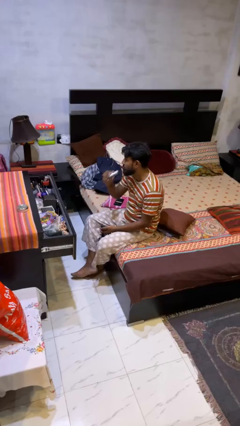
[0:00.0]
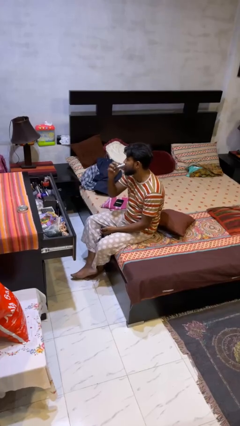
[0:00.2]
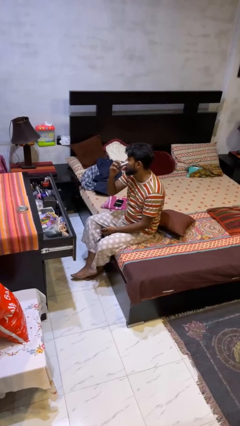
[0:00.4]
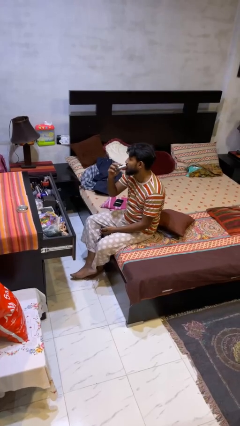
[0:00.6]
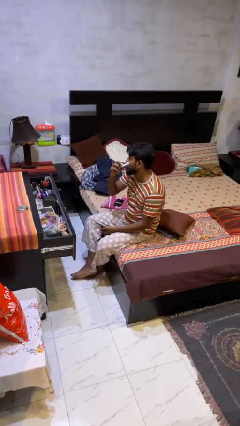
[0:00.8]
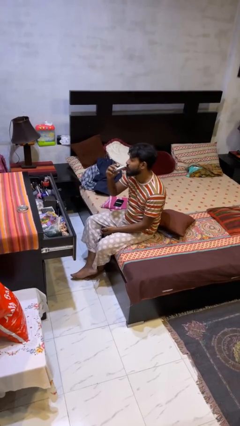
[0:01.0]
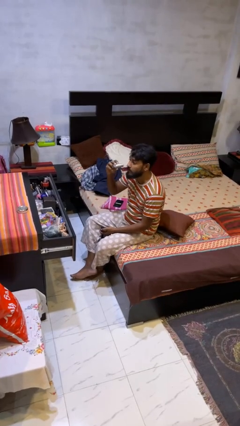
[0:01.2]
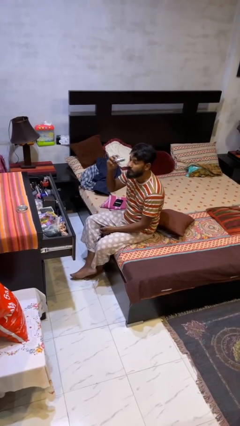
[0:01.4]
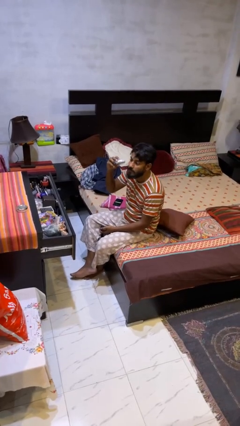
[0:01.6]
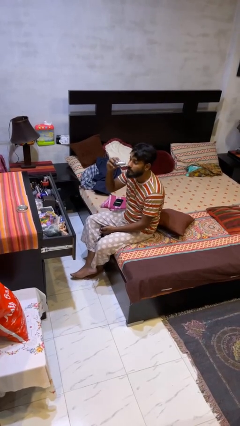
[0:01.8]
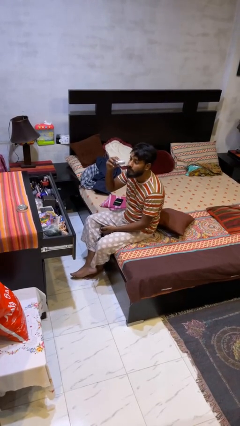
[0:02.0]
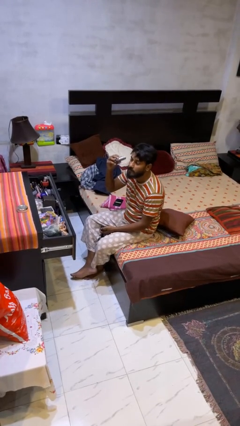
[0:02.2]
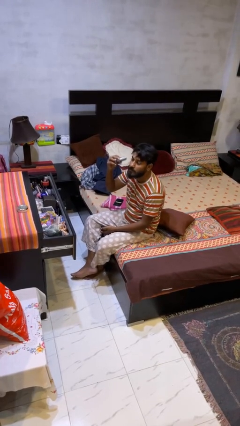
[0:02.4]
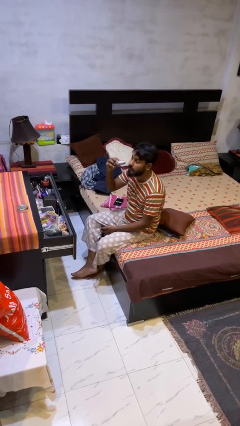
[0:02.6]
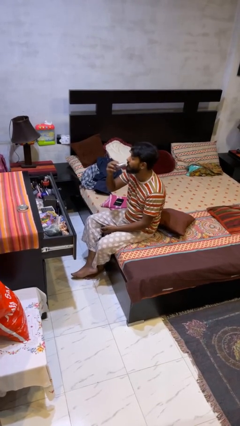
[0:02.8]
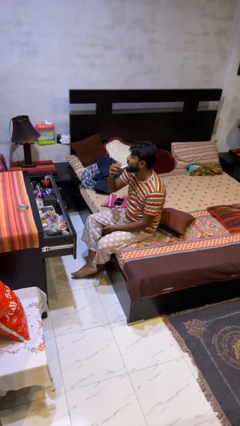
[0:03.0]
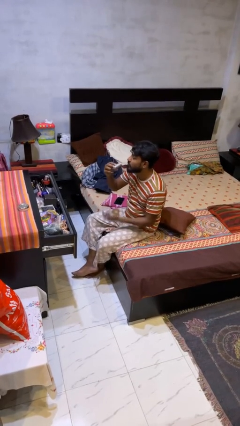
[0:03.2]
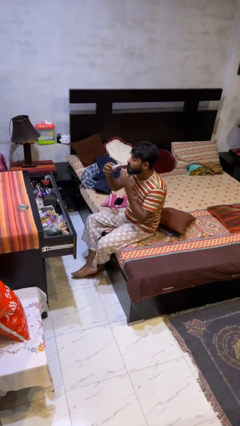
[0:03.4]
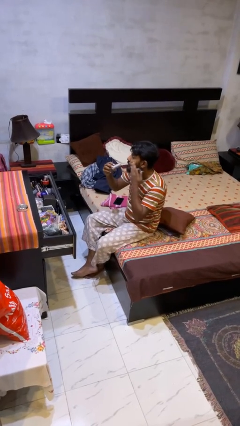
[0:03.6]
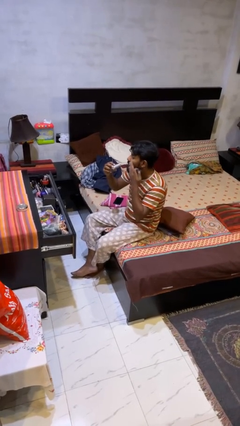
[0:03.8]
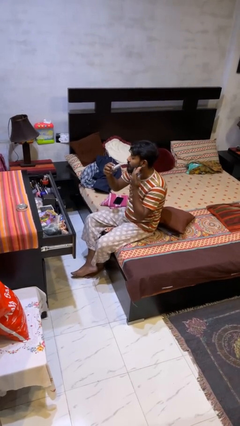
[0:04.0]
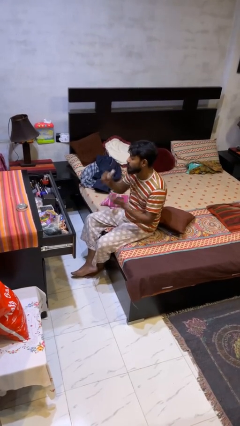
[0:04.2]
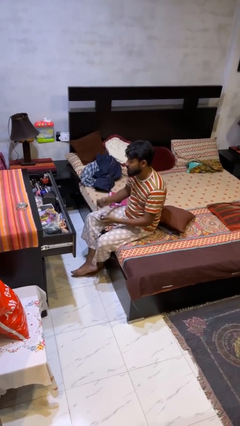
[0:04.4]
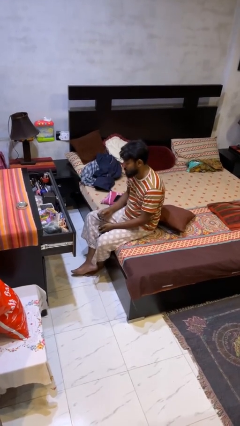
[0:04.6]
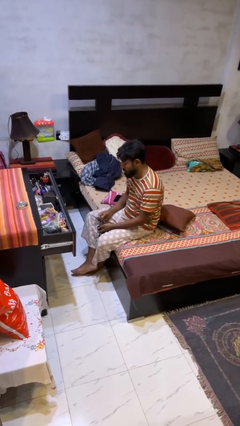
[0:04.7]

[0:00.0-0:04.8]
person applies foundation makeup

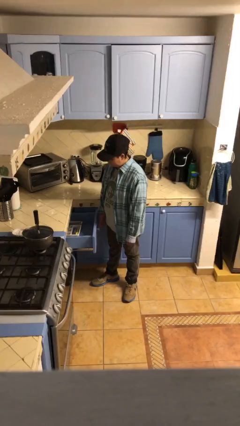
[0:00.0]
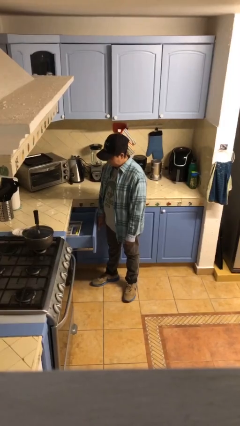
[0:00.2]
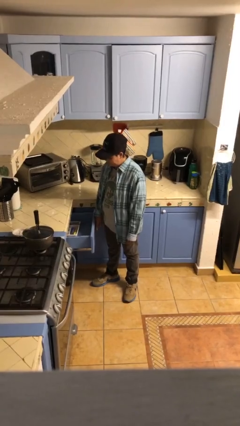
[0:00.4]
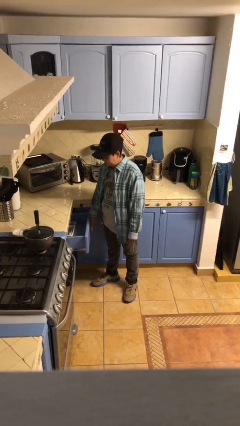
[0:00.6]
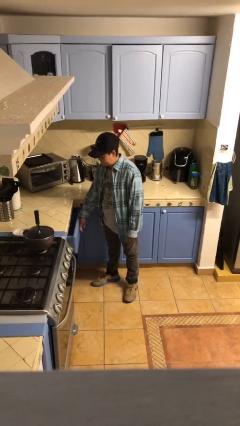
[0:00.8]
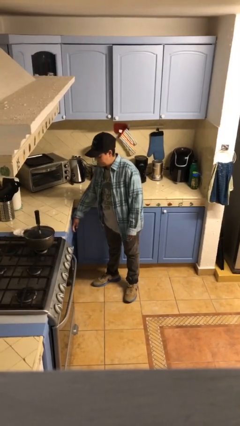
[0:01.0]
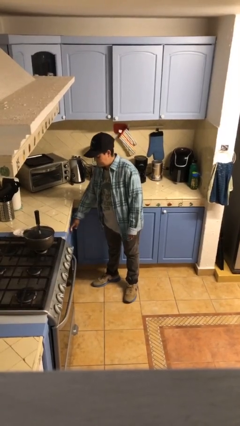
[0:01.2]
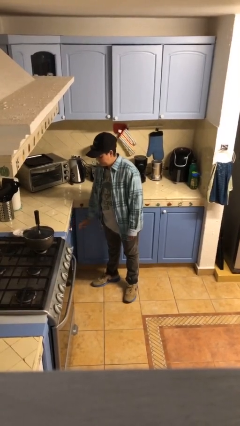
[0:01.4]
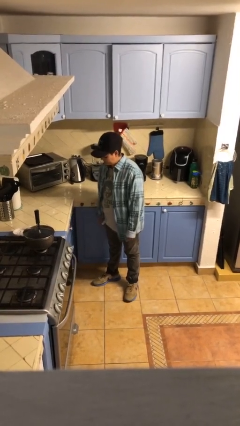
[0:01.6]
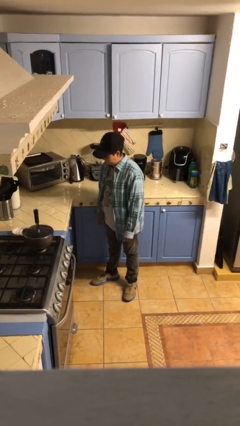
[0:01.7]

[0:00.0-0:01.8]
person closes kitchen drawer

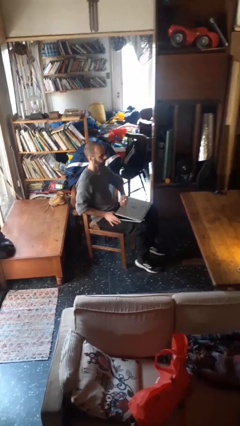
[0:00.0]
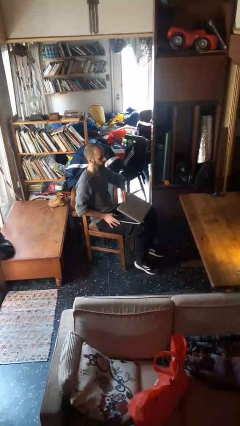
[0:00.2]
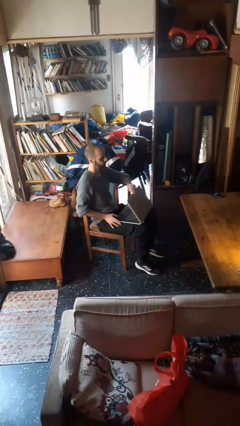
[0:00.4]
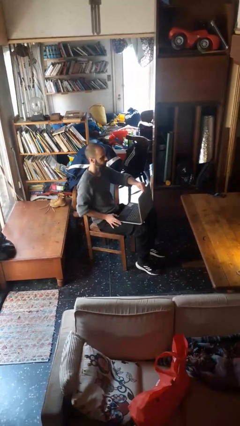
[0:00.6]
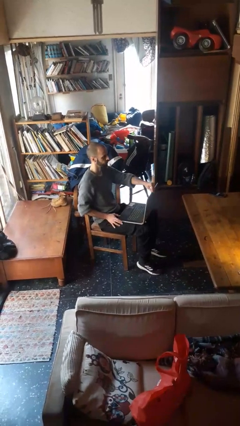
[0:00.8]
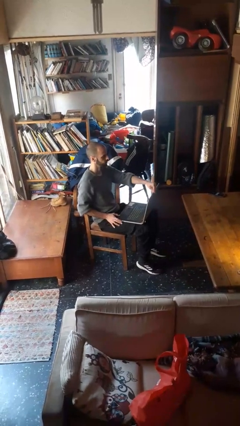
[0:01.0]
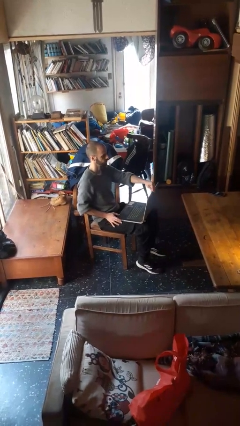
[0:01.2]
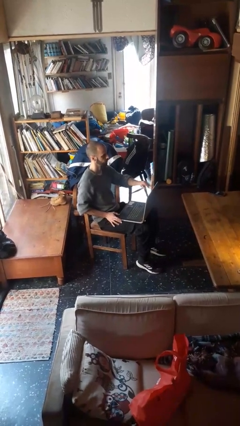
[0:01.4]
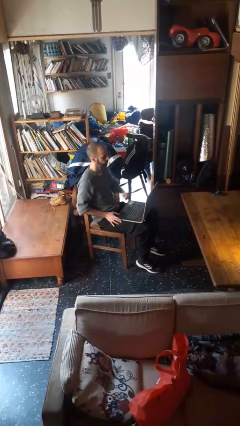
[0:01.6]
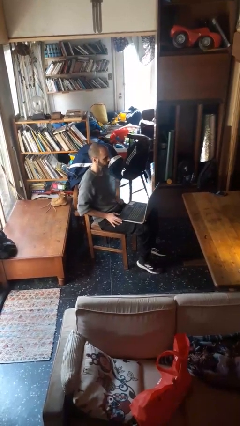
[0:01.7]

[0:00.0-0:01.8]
person opens laptop

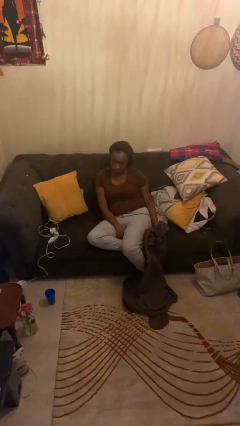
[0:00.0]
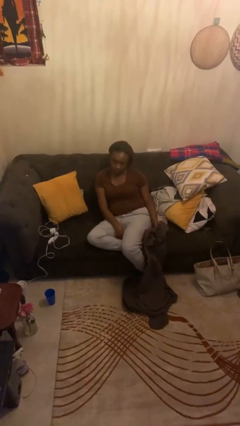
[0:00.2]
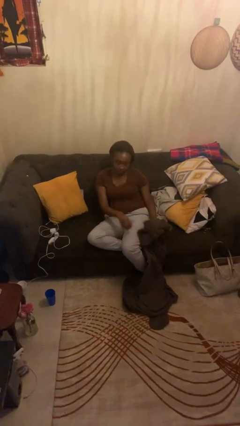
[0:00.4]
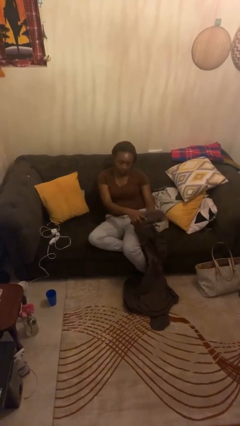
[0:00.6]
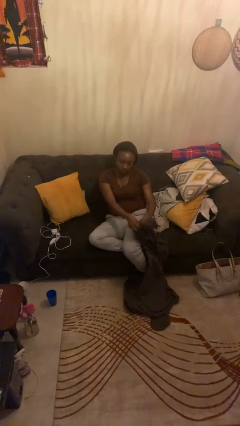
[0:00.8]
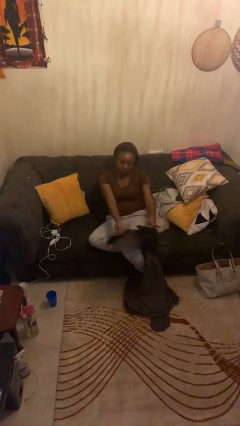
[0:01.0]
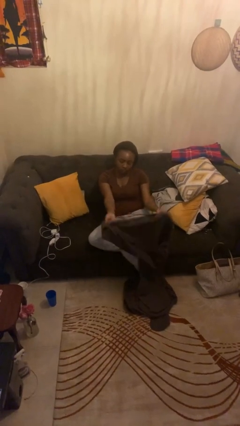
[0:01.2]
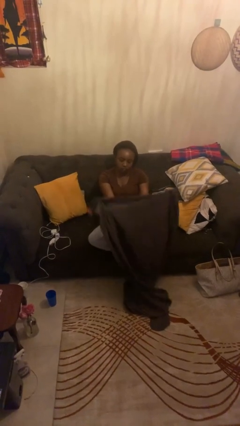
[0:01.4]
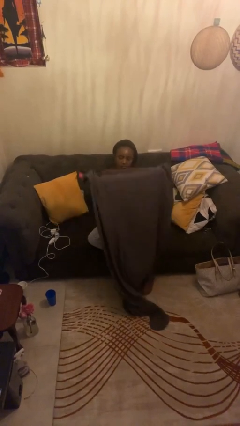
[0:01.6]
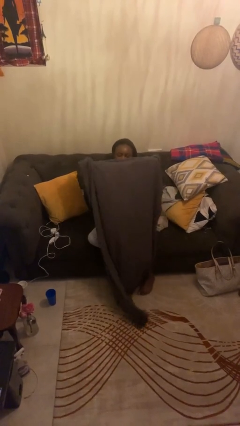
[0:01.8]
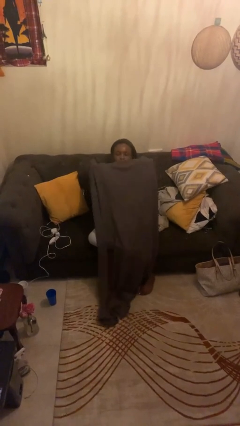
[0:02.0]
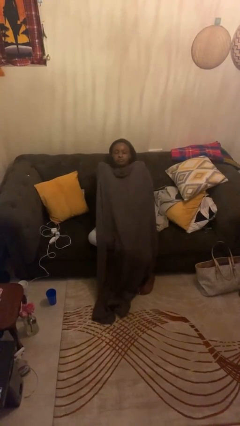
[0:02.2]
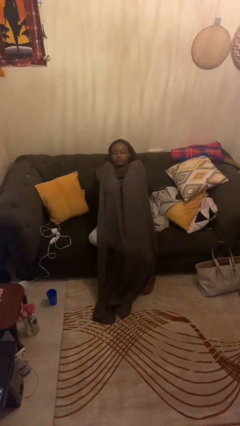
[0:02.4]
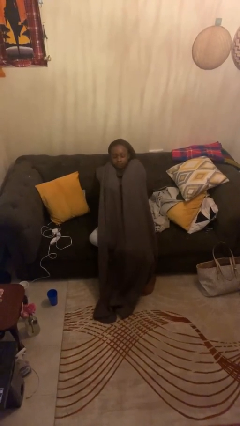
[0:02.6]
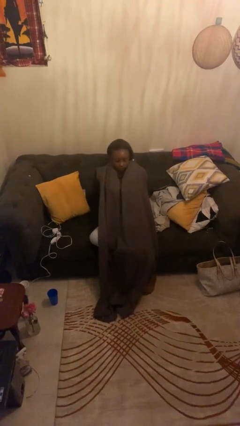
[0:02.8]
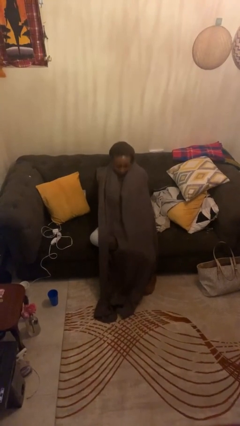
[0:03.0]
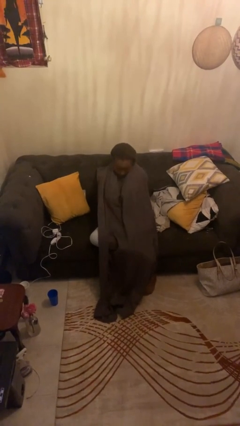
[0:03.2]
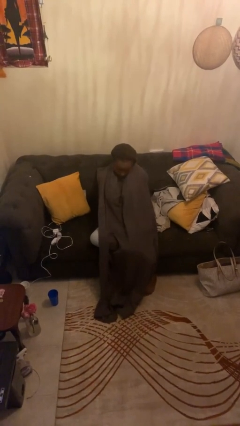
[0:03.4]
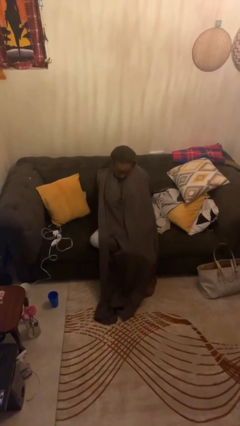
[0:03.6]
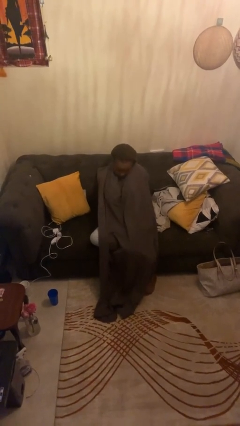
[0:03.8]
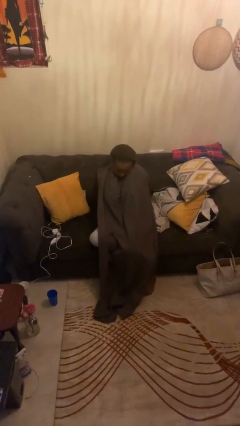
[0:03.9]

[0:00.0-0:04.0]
person covers with blanket

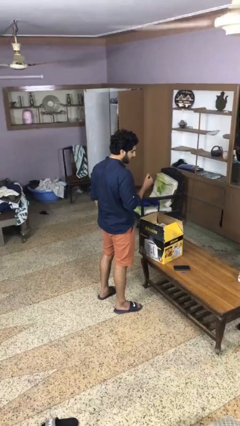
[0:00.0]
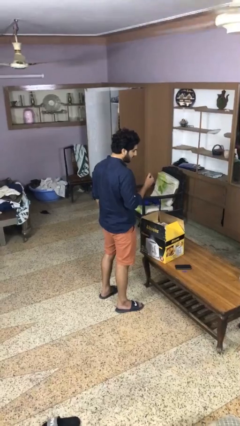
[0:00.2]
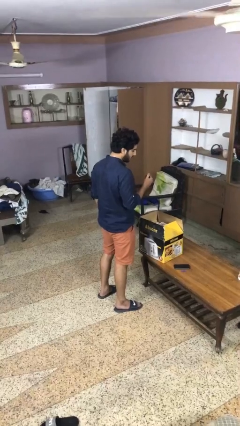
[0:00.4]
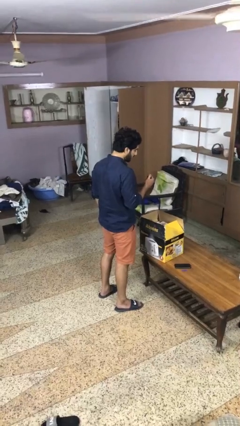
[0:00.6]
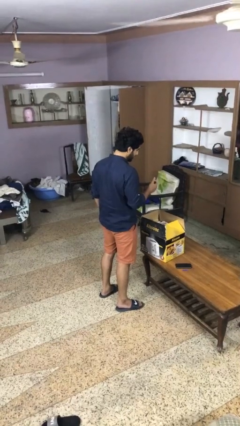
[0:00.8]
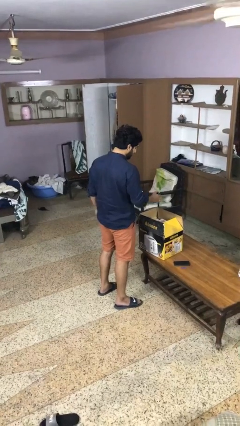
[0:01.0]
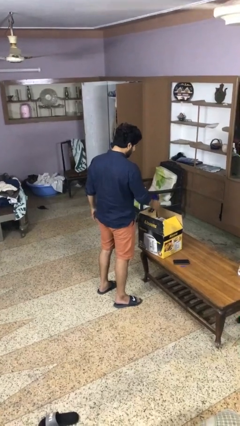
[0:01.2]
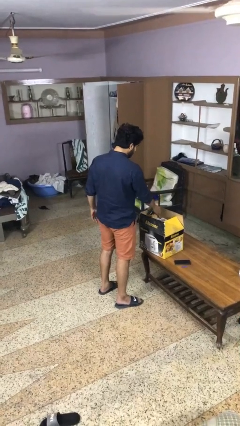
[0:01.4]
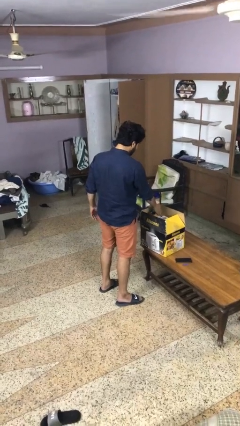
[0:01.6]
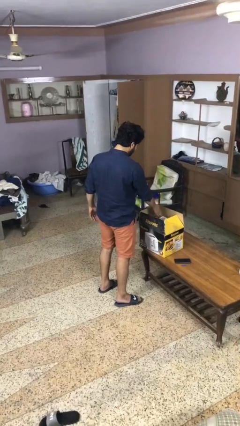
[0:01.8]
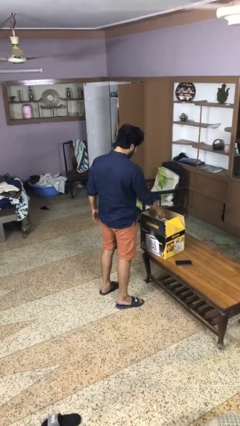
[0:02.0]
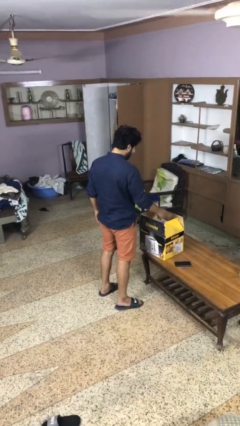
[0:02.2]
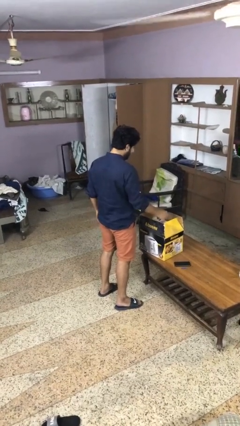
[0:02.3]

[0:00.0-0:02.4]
person puts object into box

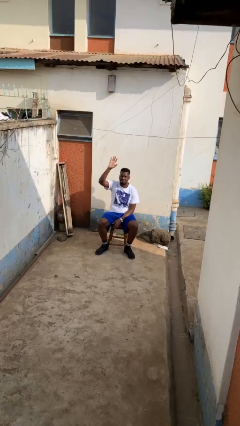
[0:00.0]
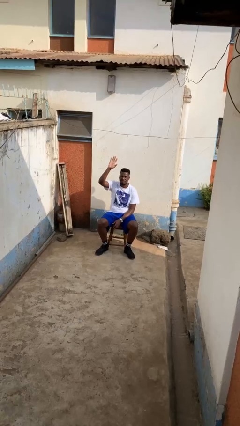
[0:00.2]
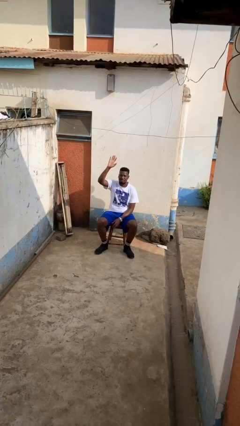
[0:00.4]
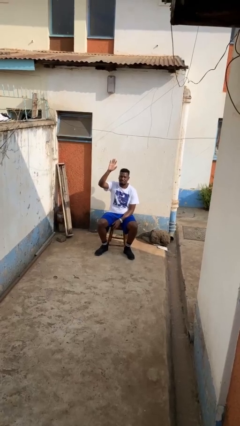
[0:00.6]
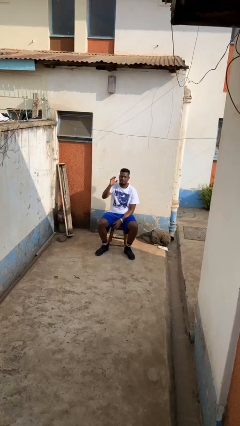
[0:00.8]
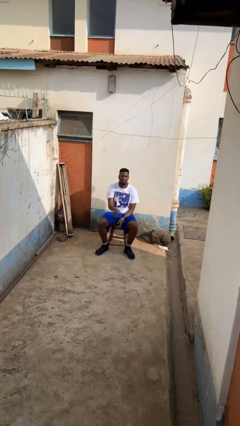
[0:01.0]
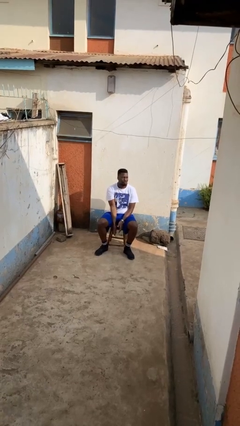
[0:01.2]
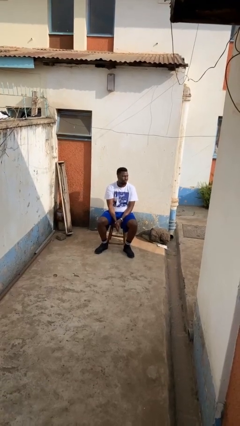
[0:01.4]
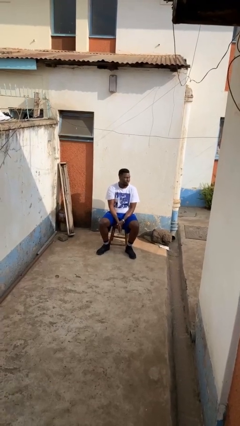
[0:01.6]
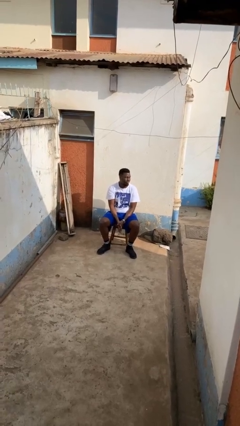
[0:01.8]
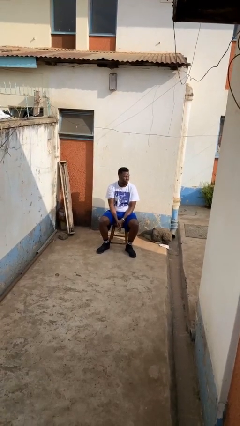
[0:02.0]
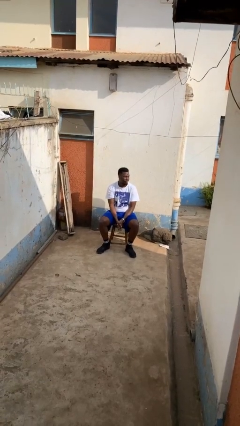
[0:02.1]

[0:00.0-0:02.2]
person gestures lower hand
